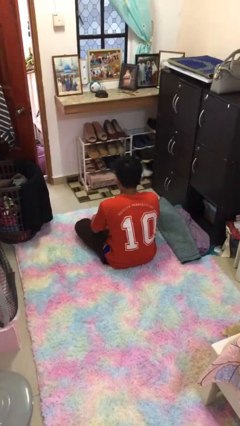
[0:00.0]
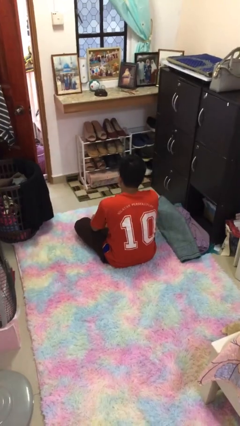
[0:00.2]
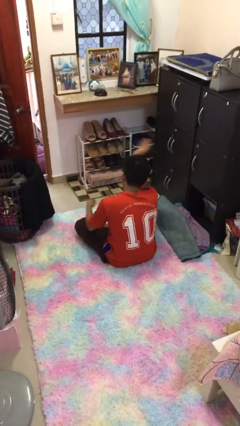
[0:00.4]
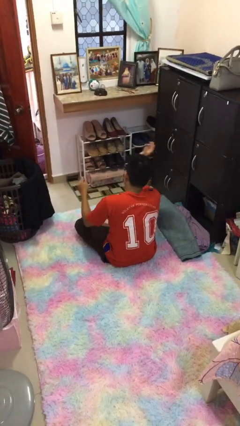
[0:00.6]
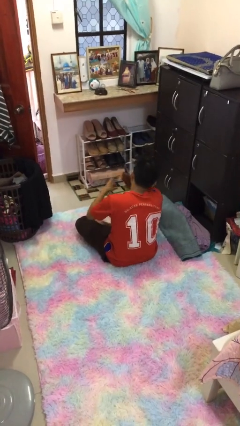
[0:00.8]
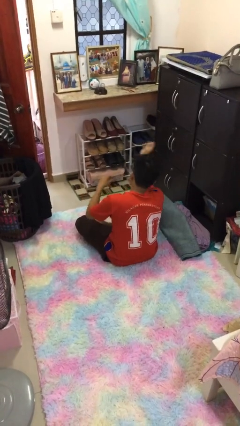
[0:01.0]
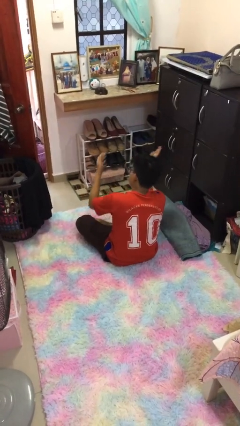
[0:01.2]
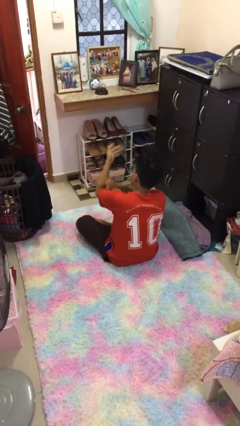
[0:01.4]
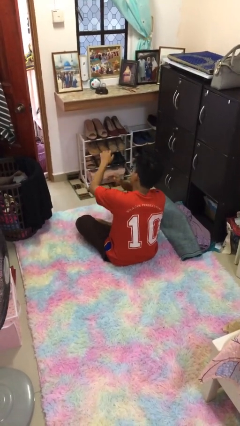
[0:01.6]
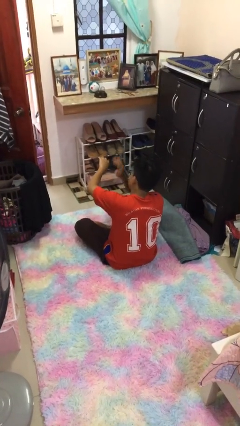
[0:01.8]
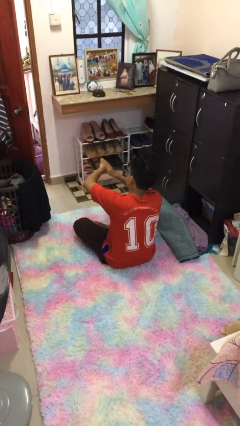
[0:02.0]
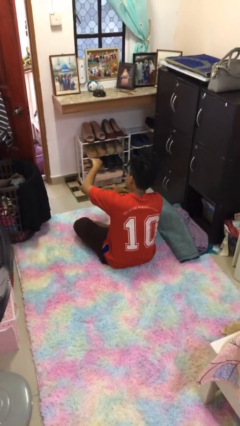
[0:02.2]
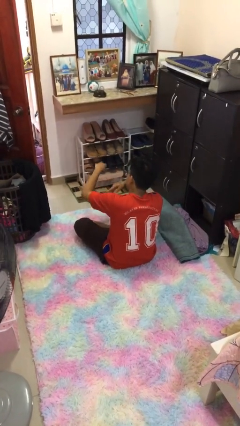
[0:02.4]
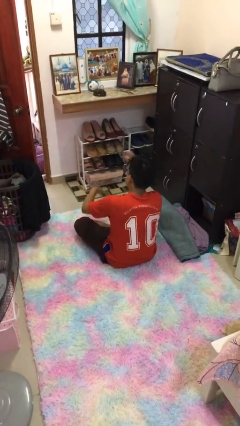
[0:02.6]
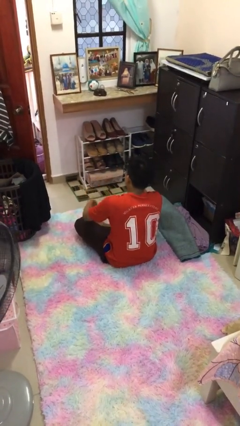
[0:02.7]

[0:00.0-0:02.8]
person swats bug

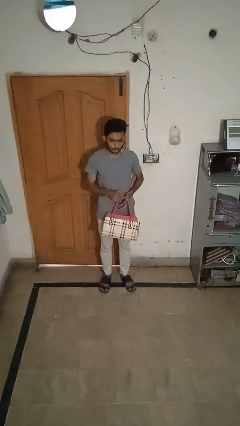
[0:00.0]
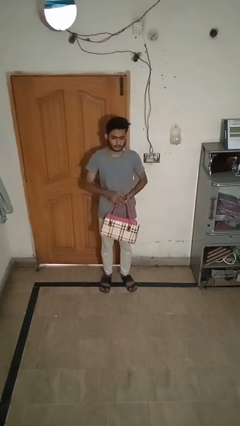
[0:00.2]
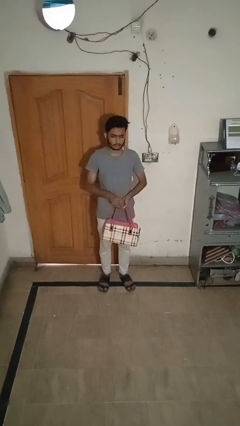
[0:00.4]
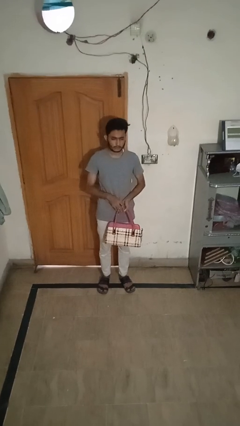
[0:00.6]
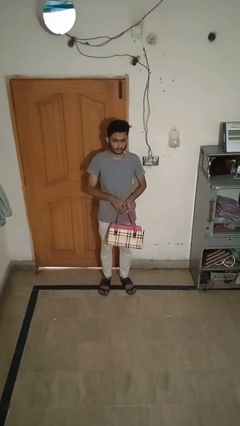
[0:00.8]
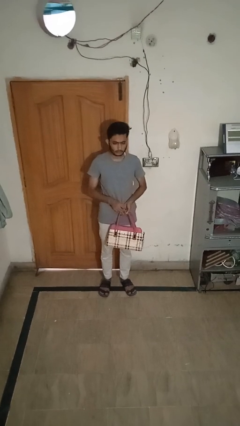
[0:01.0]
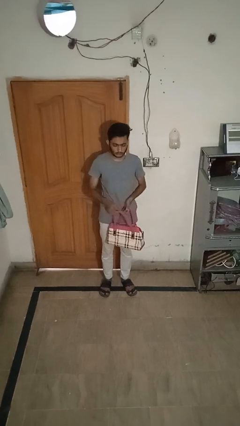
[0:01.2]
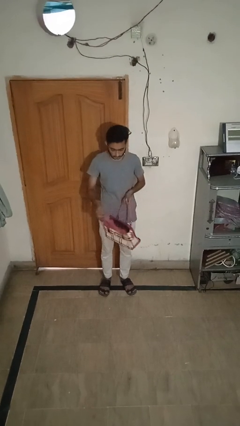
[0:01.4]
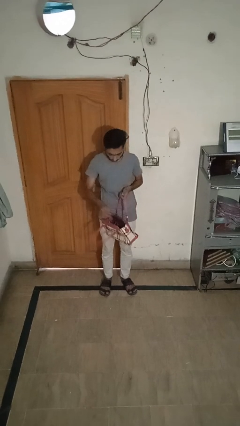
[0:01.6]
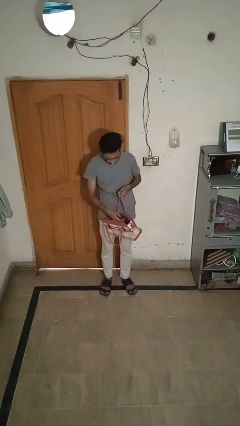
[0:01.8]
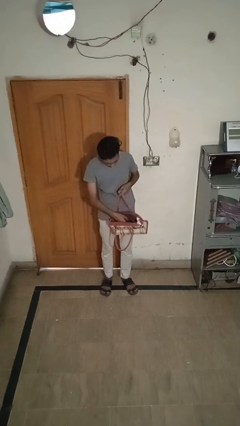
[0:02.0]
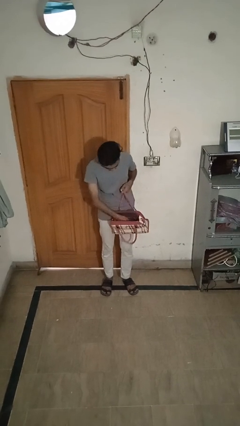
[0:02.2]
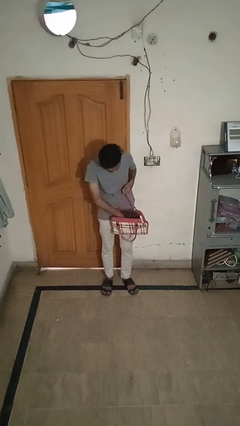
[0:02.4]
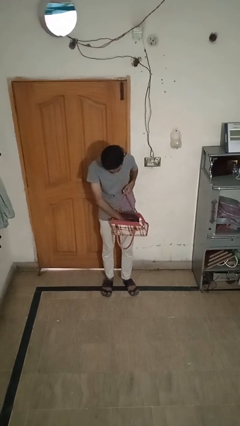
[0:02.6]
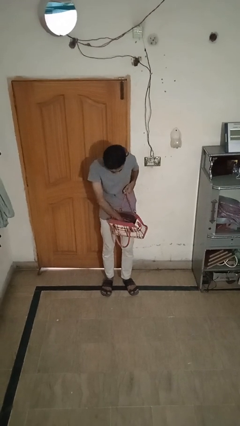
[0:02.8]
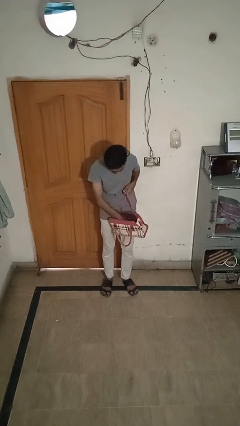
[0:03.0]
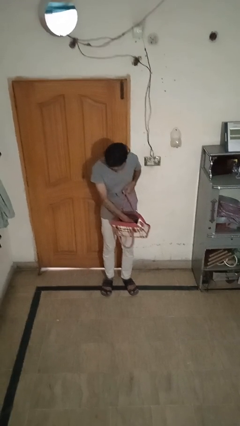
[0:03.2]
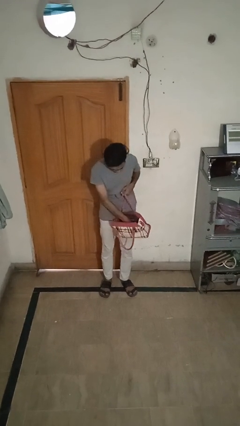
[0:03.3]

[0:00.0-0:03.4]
person searches in purse

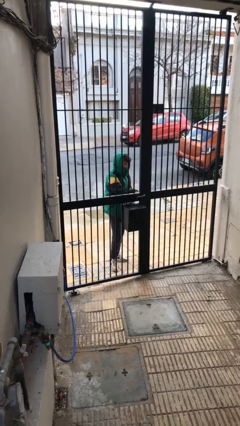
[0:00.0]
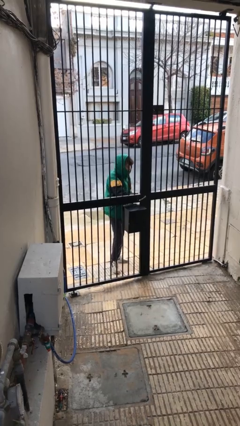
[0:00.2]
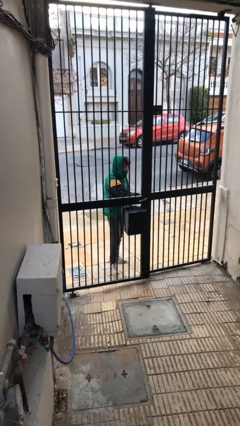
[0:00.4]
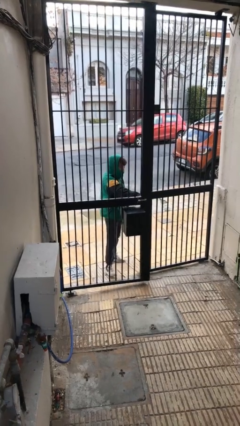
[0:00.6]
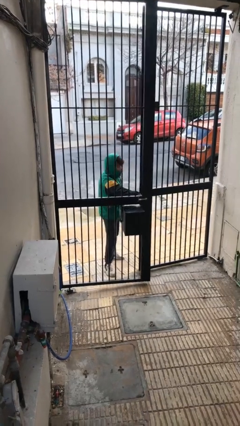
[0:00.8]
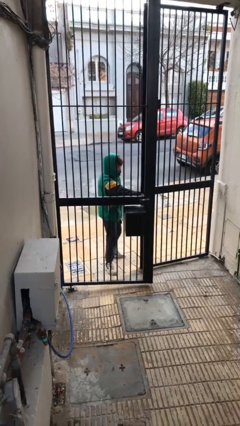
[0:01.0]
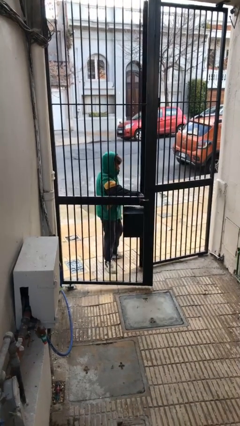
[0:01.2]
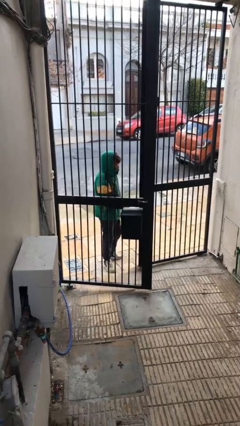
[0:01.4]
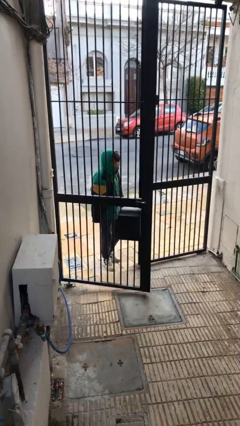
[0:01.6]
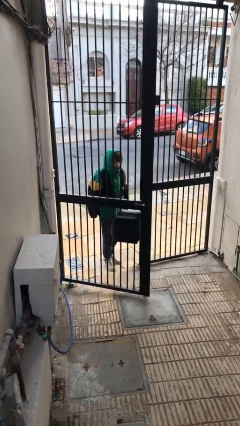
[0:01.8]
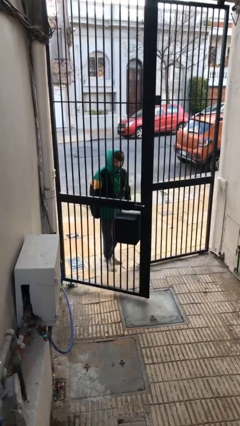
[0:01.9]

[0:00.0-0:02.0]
person opens gate

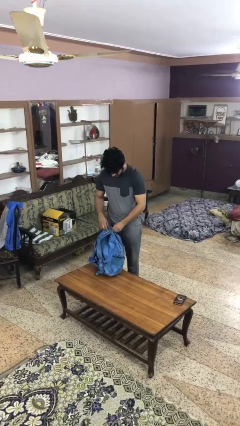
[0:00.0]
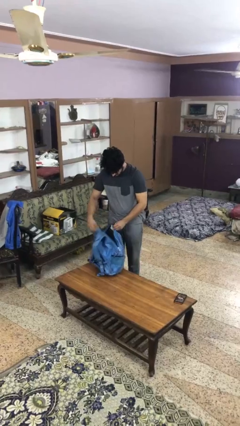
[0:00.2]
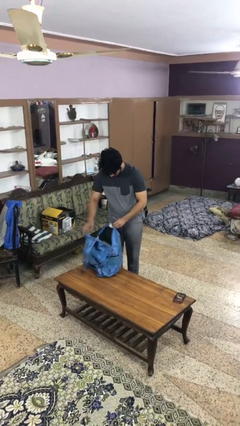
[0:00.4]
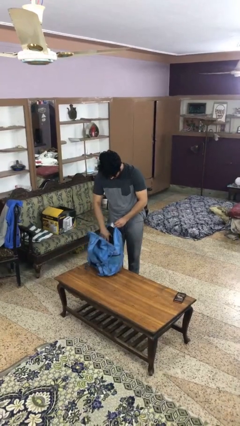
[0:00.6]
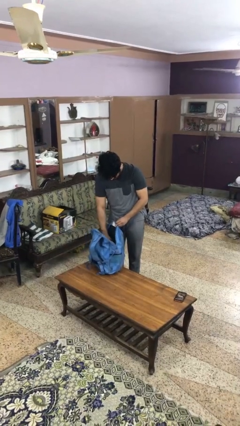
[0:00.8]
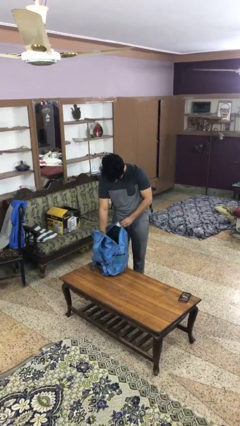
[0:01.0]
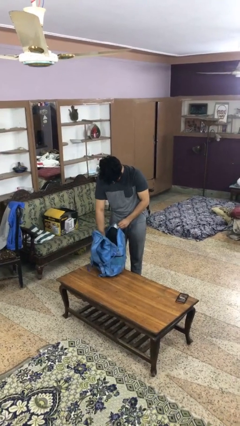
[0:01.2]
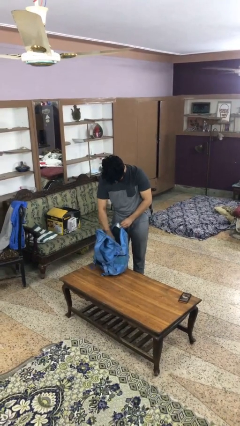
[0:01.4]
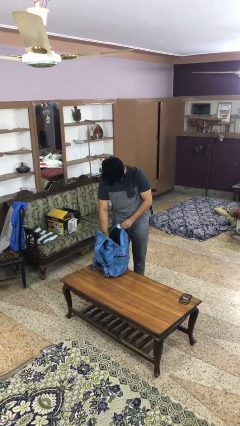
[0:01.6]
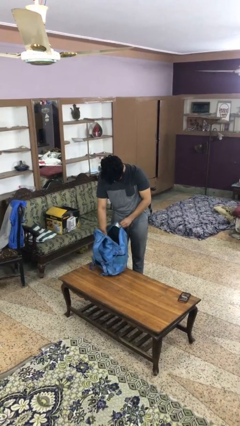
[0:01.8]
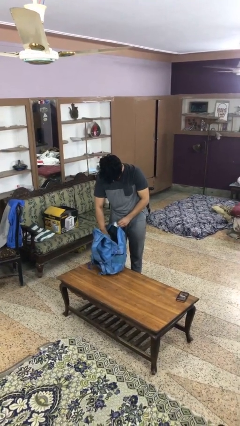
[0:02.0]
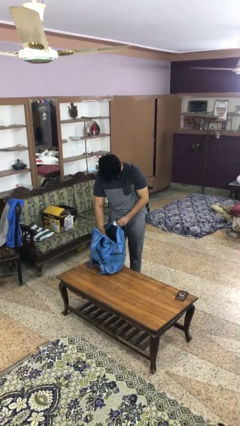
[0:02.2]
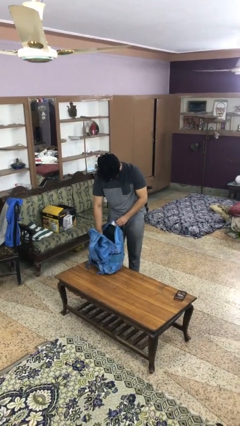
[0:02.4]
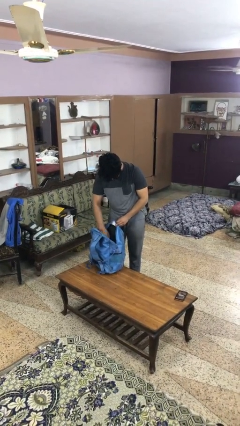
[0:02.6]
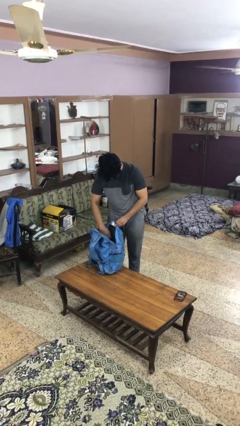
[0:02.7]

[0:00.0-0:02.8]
person searches in bag

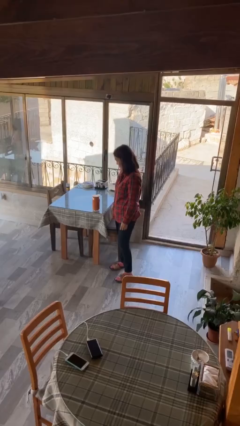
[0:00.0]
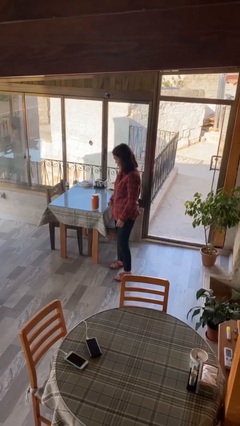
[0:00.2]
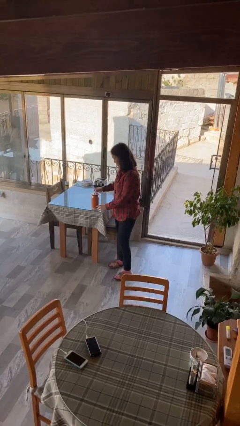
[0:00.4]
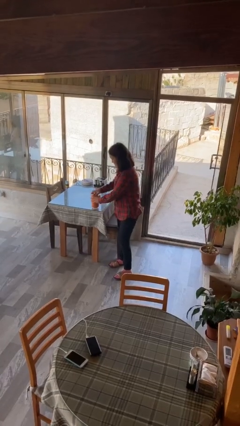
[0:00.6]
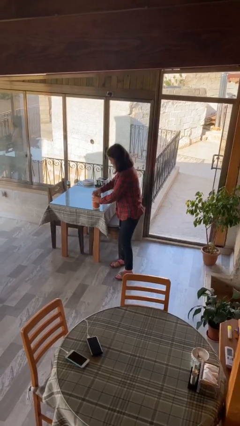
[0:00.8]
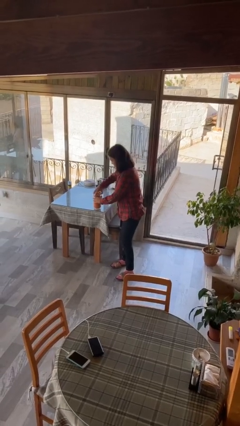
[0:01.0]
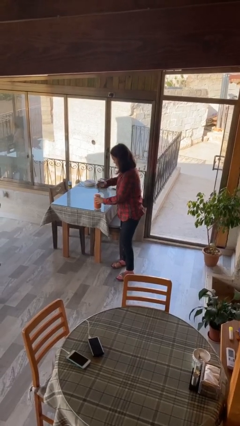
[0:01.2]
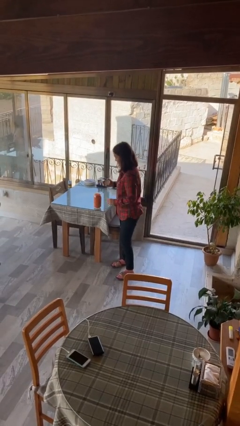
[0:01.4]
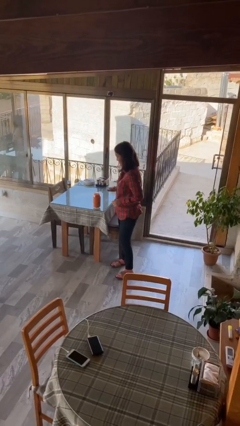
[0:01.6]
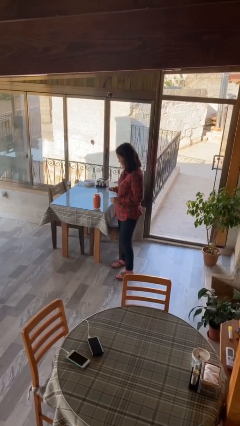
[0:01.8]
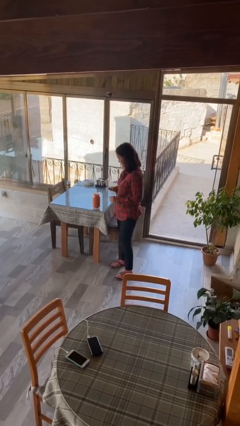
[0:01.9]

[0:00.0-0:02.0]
person opens jar

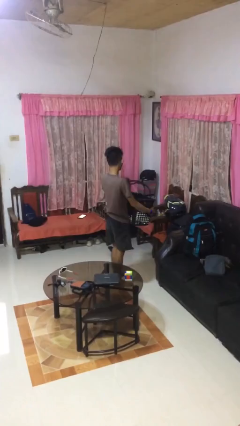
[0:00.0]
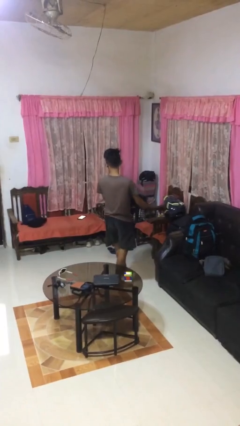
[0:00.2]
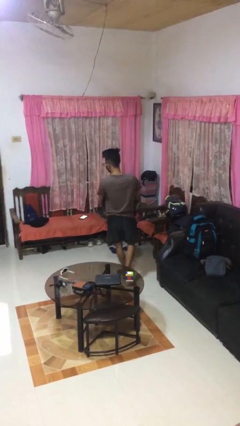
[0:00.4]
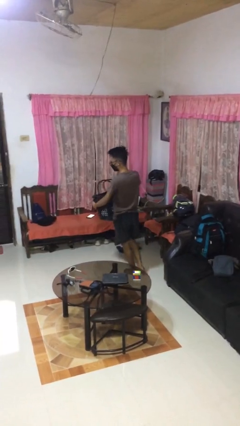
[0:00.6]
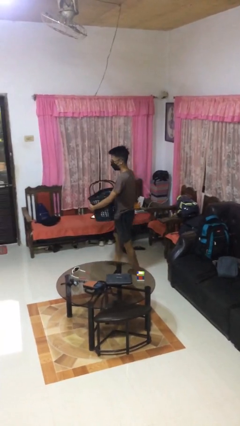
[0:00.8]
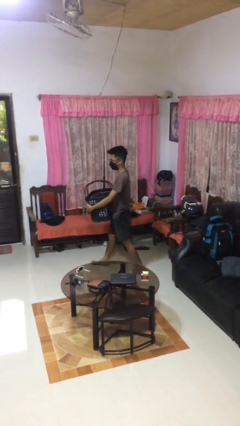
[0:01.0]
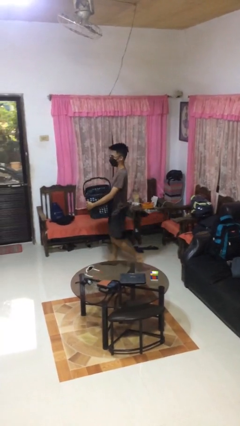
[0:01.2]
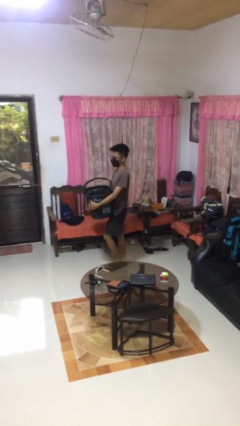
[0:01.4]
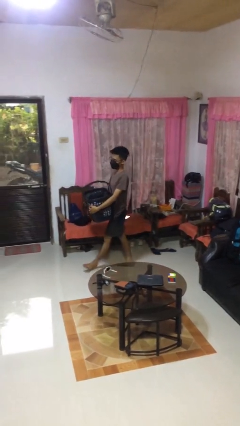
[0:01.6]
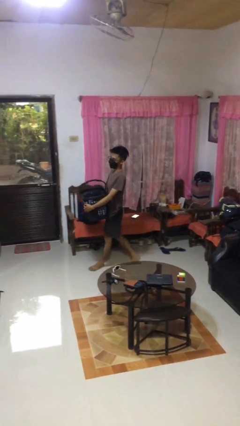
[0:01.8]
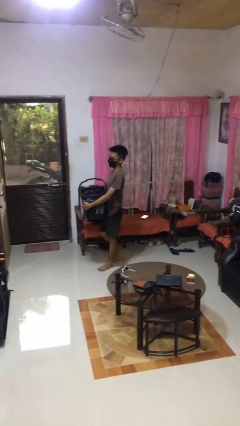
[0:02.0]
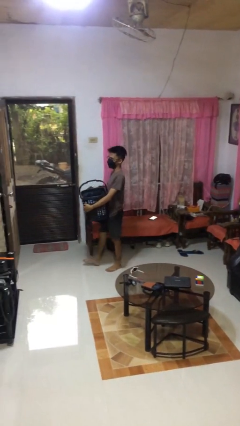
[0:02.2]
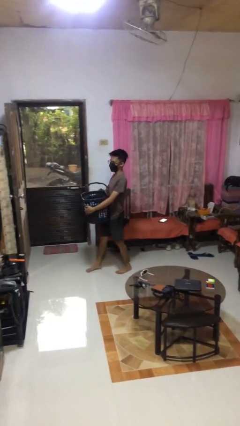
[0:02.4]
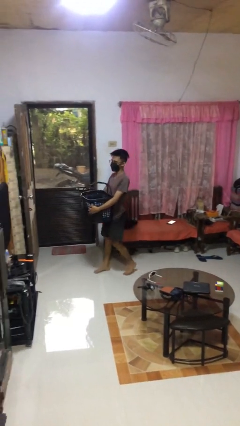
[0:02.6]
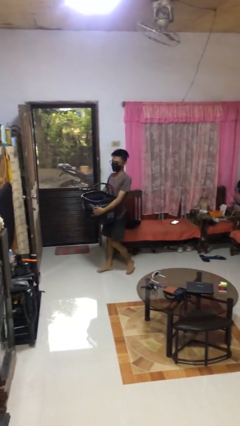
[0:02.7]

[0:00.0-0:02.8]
person carries laundry basket

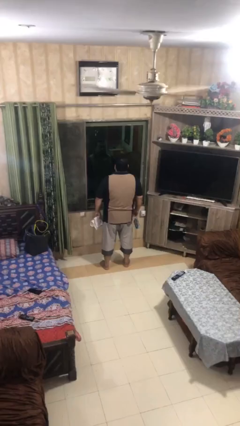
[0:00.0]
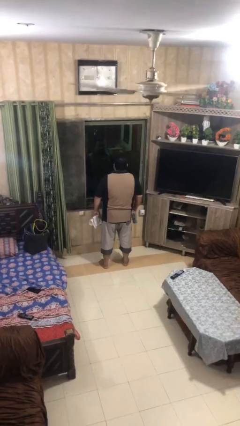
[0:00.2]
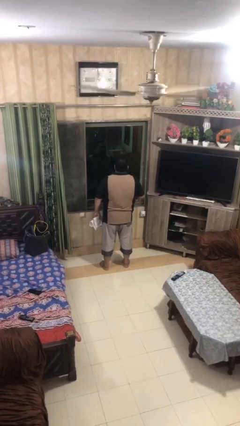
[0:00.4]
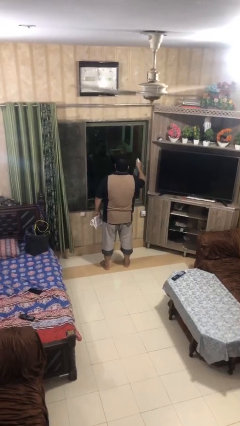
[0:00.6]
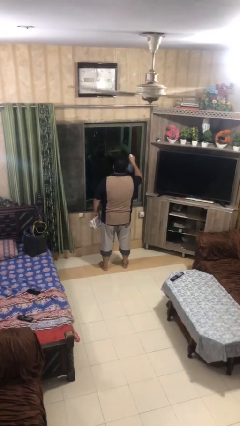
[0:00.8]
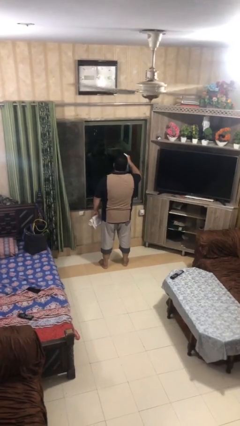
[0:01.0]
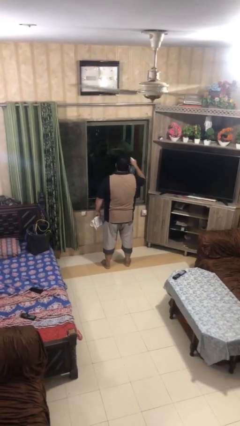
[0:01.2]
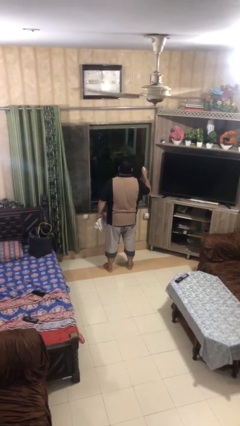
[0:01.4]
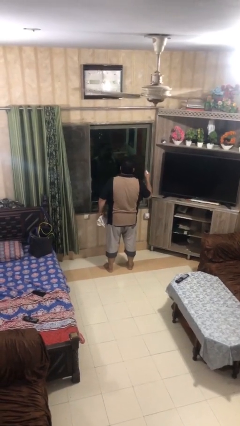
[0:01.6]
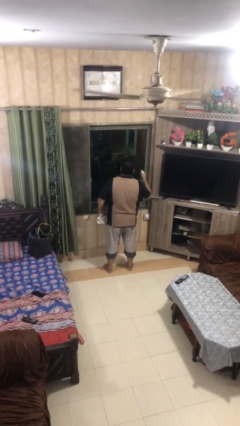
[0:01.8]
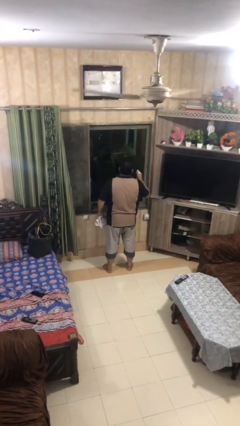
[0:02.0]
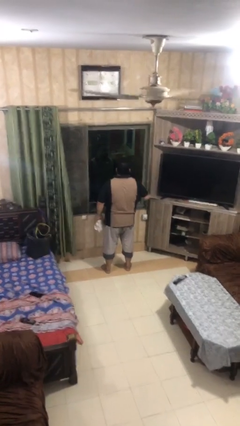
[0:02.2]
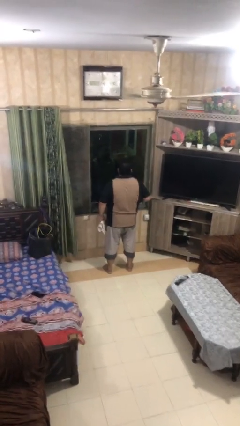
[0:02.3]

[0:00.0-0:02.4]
person sprays from bottle
